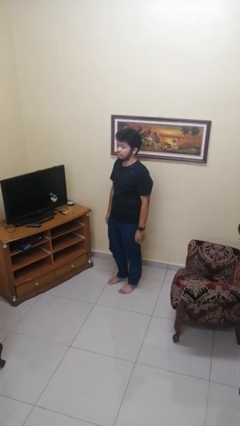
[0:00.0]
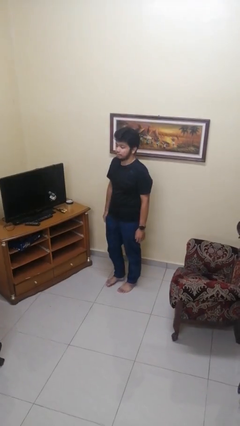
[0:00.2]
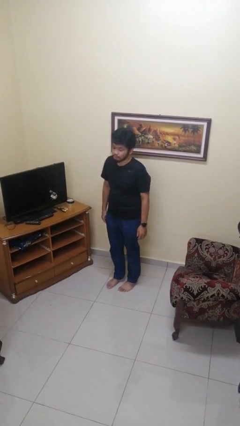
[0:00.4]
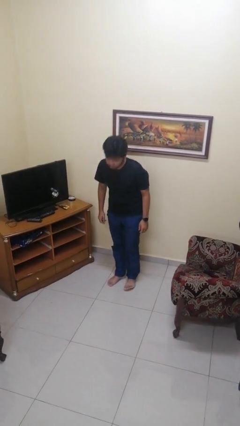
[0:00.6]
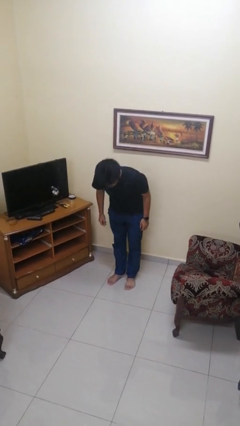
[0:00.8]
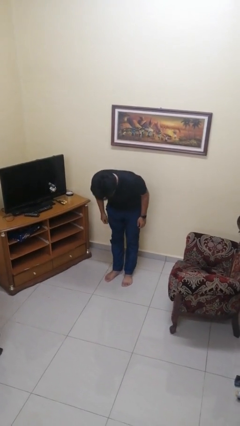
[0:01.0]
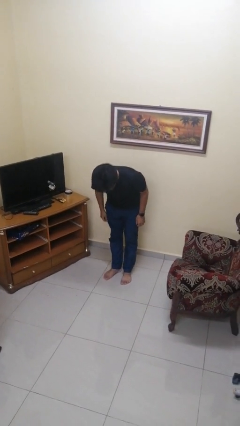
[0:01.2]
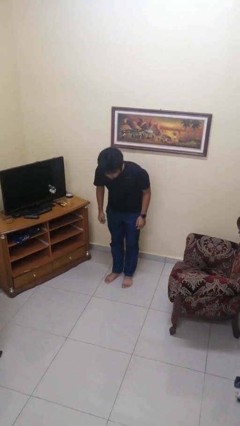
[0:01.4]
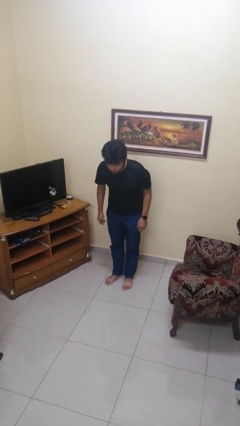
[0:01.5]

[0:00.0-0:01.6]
person bows

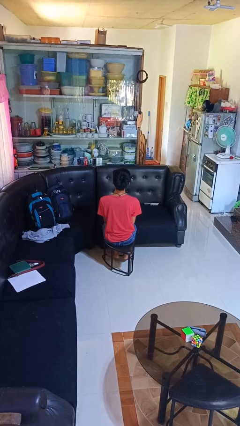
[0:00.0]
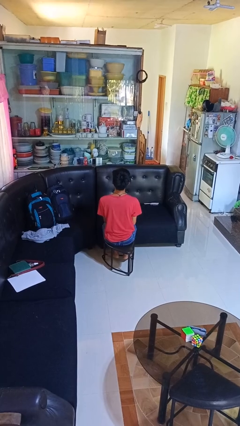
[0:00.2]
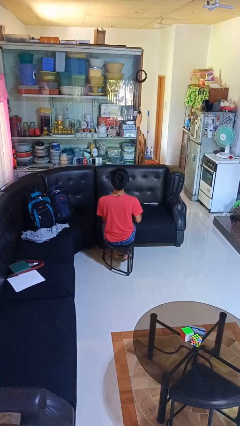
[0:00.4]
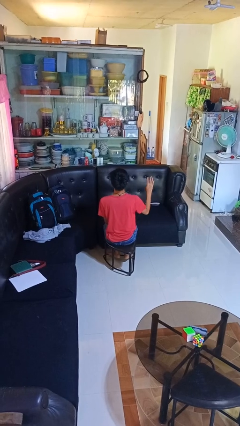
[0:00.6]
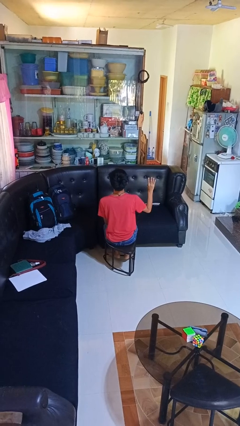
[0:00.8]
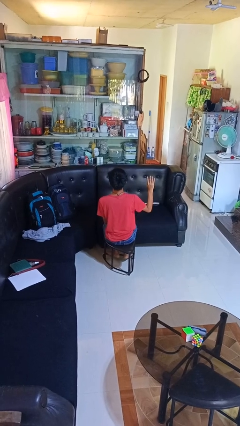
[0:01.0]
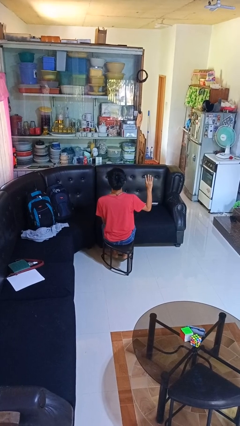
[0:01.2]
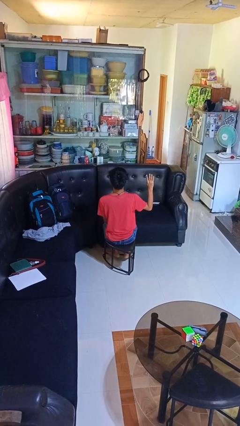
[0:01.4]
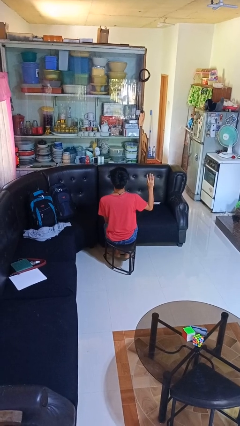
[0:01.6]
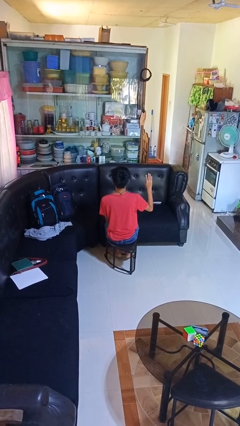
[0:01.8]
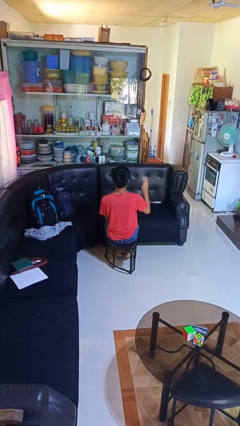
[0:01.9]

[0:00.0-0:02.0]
person gestures number four

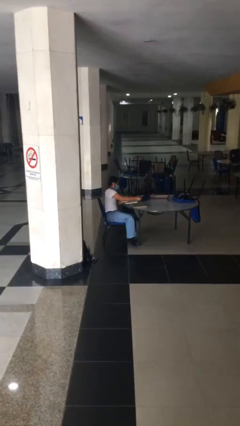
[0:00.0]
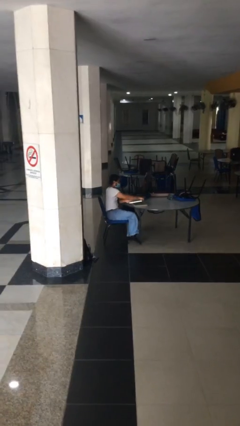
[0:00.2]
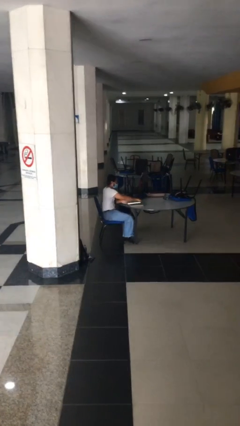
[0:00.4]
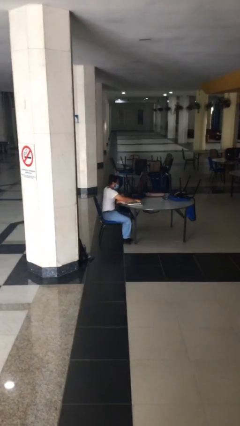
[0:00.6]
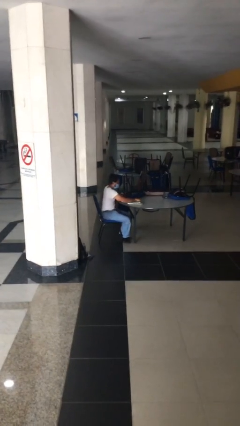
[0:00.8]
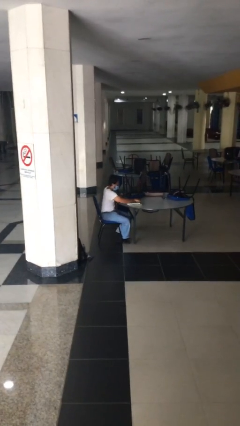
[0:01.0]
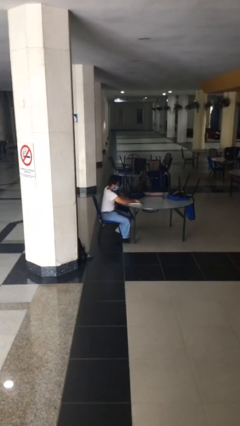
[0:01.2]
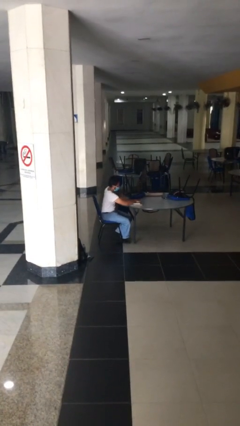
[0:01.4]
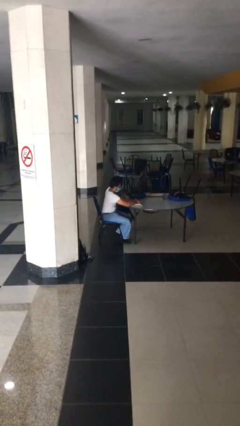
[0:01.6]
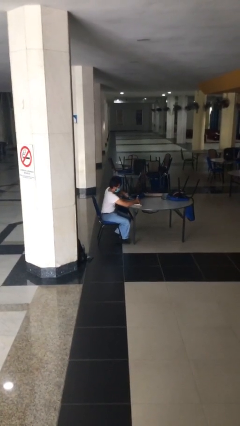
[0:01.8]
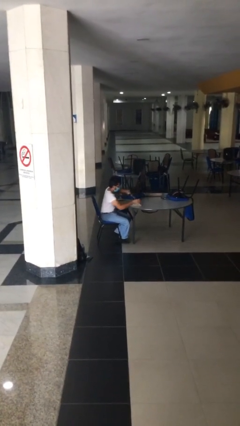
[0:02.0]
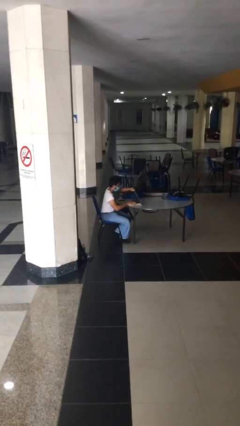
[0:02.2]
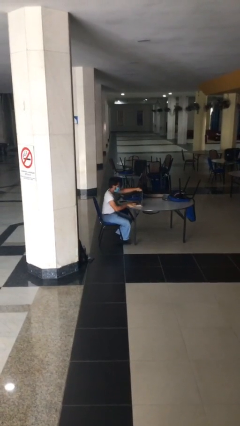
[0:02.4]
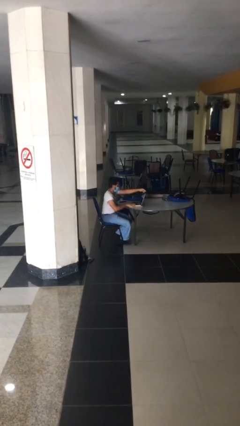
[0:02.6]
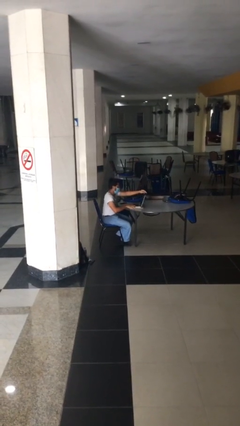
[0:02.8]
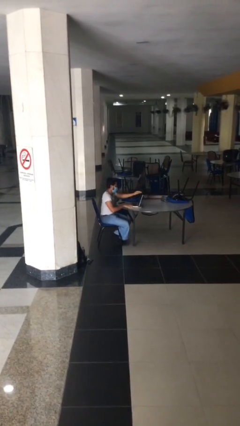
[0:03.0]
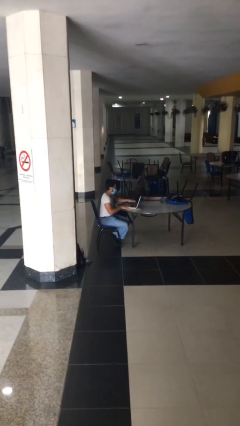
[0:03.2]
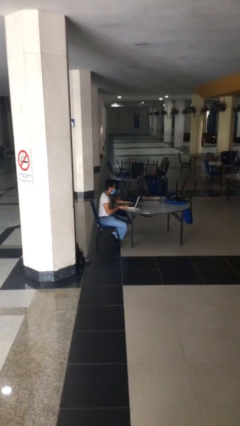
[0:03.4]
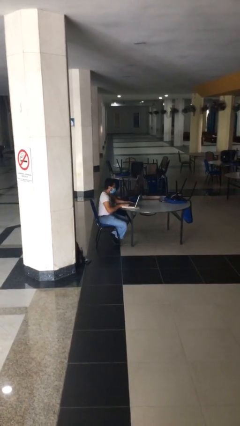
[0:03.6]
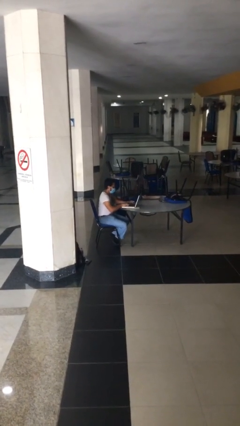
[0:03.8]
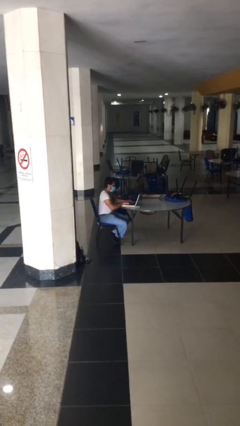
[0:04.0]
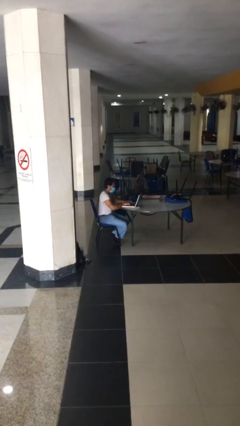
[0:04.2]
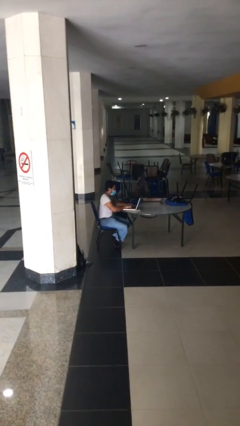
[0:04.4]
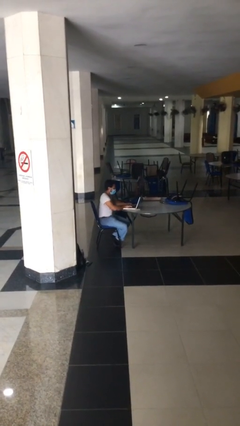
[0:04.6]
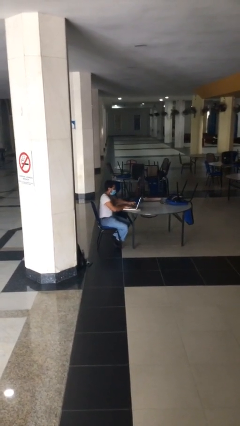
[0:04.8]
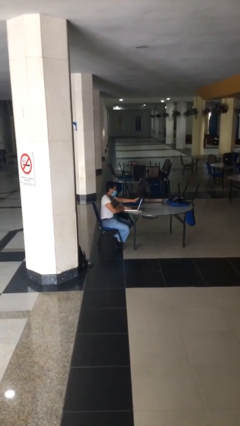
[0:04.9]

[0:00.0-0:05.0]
person interacts with laptop

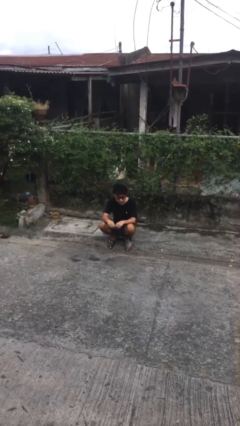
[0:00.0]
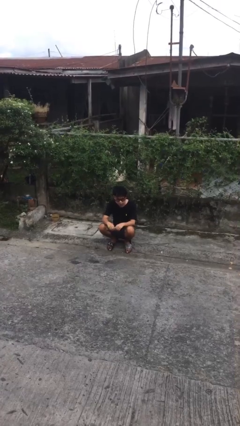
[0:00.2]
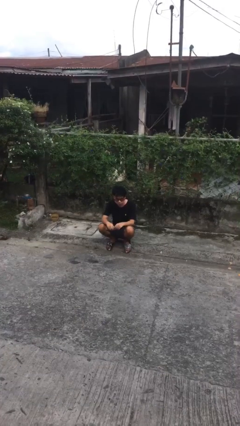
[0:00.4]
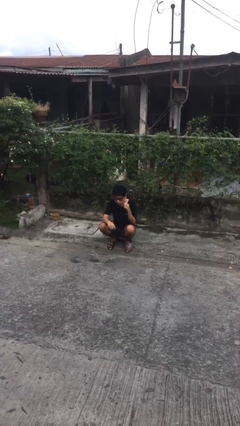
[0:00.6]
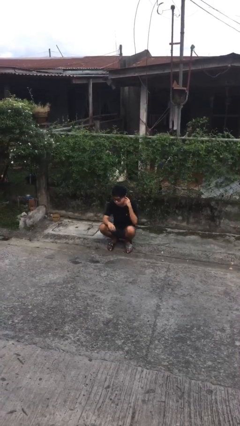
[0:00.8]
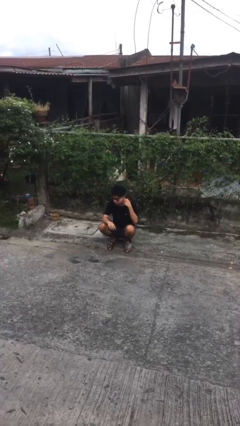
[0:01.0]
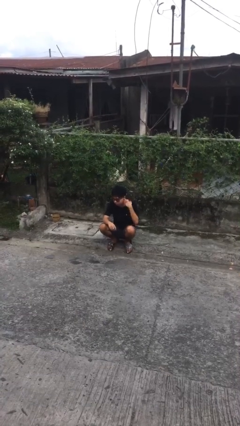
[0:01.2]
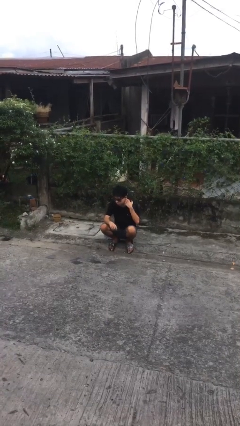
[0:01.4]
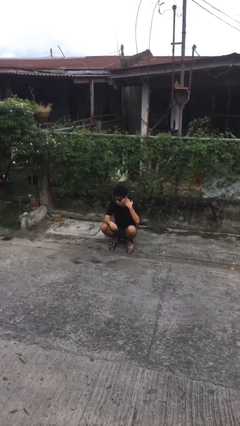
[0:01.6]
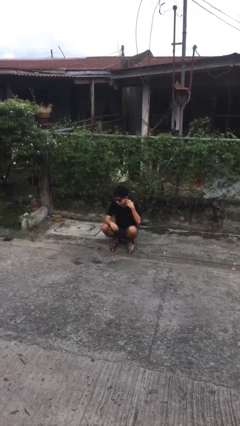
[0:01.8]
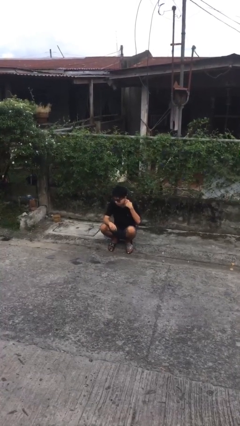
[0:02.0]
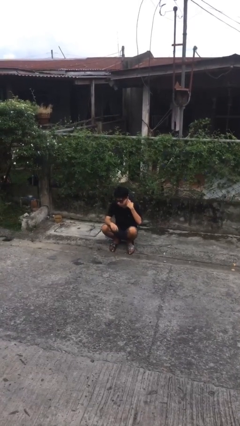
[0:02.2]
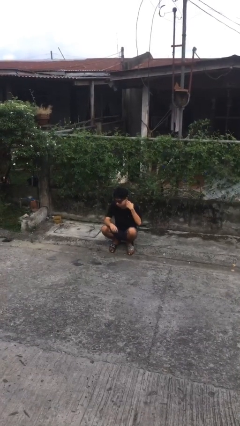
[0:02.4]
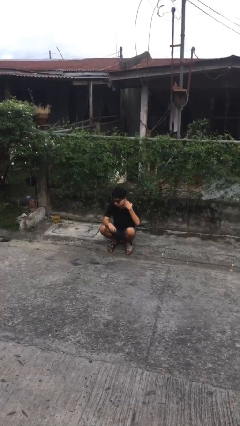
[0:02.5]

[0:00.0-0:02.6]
person touches earlobe

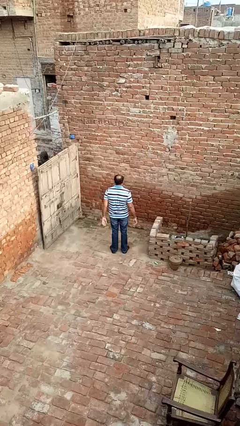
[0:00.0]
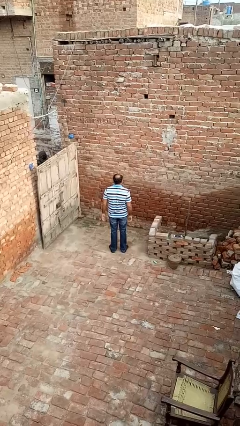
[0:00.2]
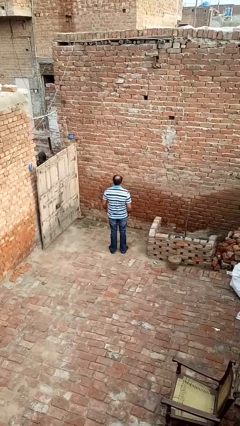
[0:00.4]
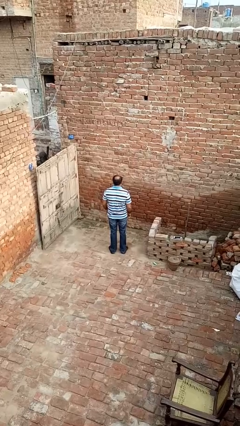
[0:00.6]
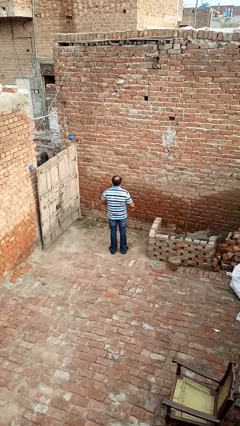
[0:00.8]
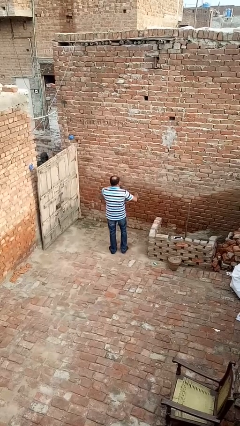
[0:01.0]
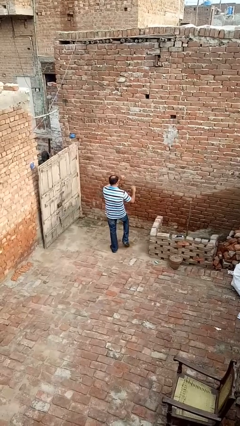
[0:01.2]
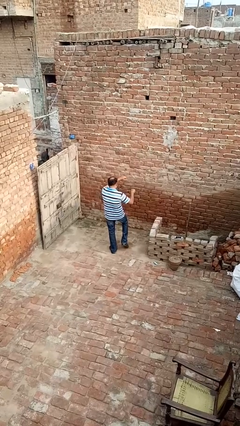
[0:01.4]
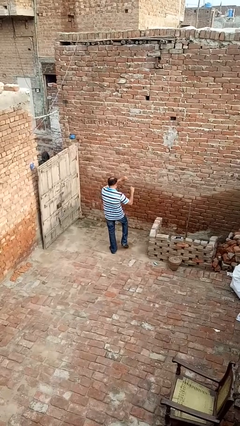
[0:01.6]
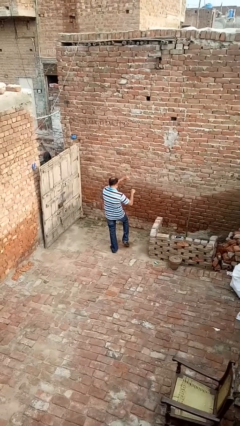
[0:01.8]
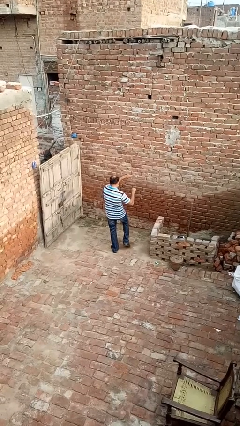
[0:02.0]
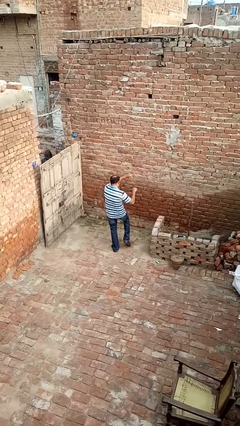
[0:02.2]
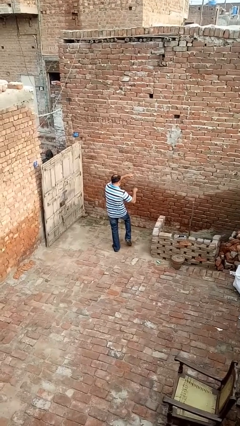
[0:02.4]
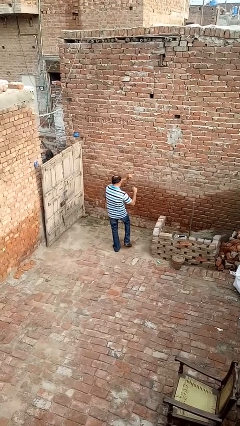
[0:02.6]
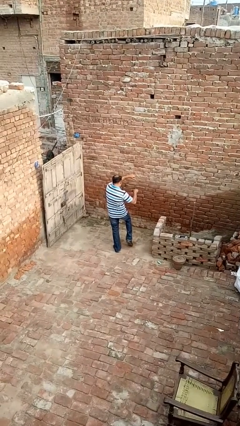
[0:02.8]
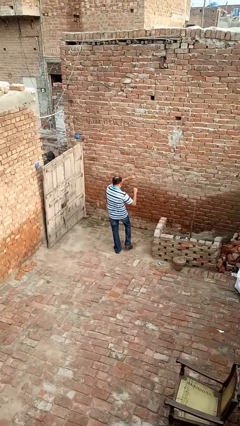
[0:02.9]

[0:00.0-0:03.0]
person dances in place

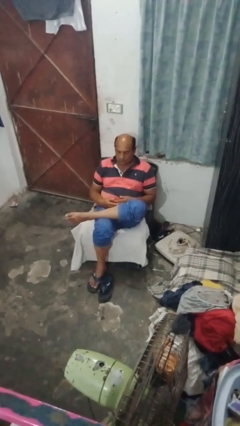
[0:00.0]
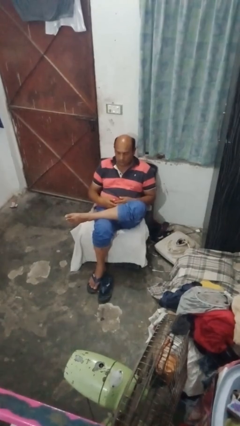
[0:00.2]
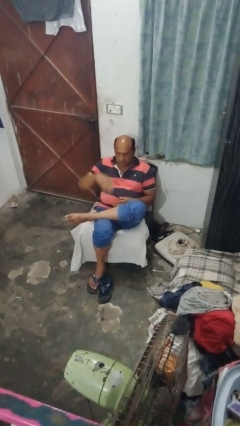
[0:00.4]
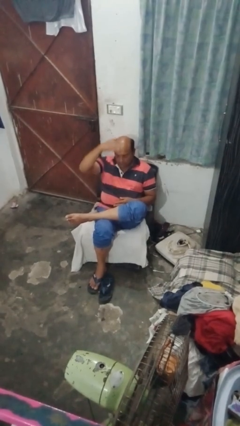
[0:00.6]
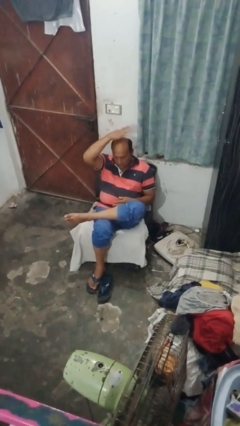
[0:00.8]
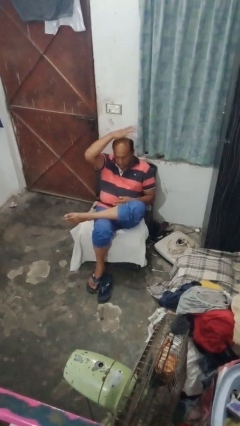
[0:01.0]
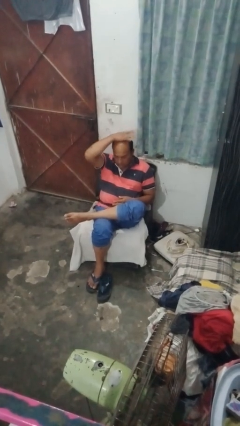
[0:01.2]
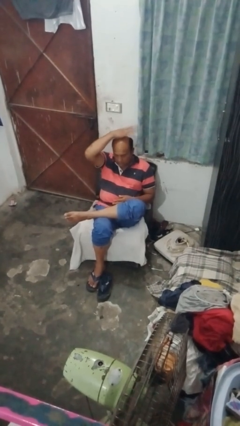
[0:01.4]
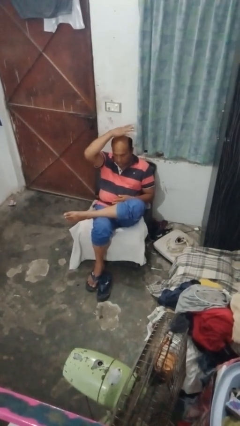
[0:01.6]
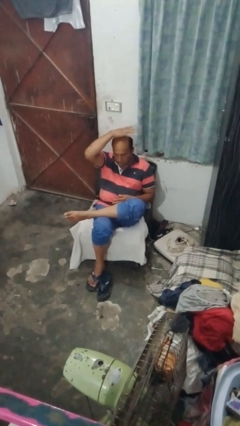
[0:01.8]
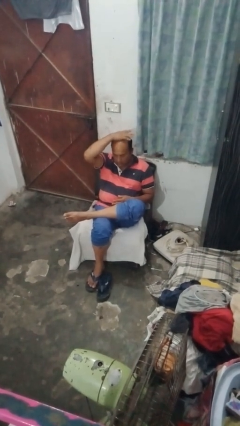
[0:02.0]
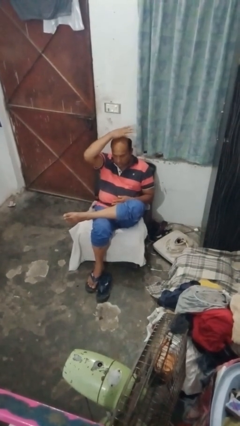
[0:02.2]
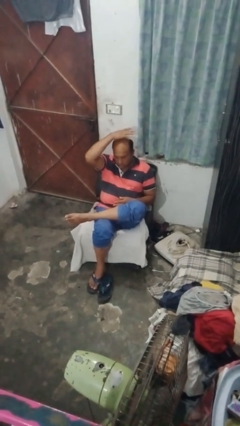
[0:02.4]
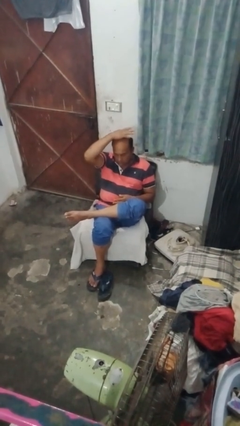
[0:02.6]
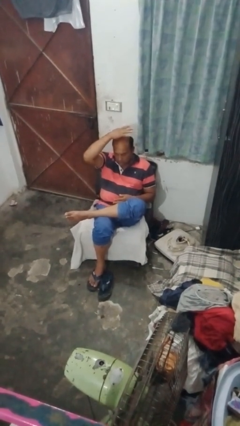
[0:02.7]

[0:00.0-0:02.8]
person pats head
